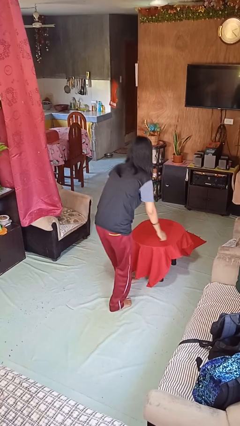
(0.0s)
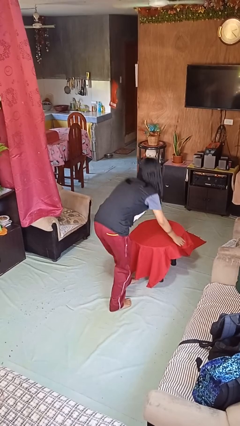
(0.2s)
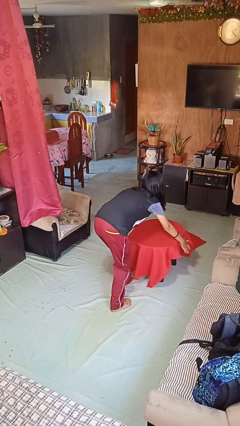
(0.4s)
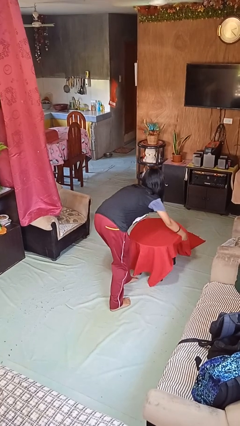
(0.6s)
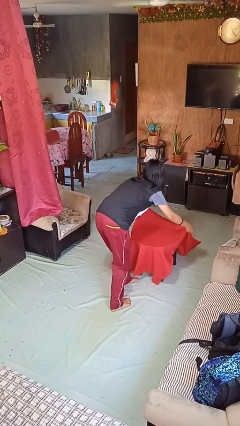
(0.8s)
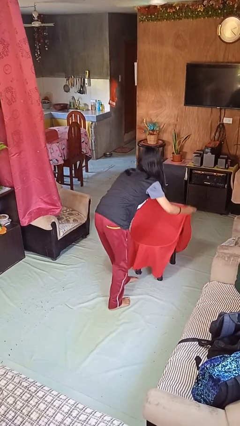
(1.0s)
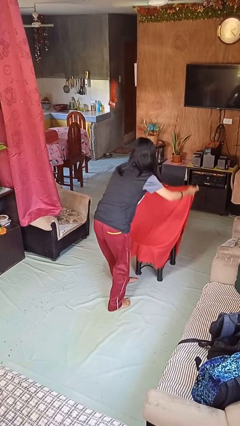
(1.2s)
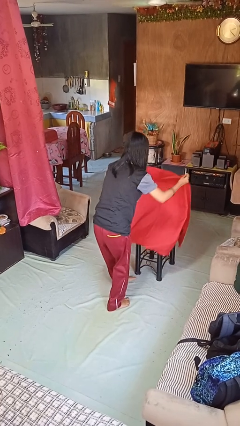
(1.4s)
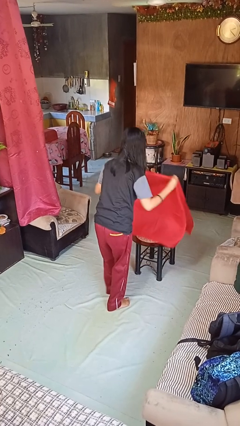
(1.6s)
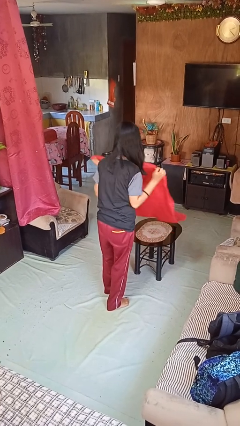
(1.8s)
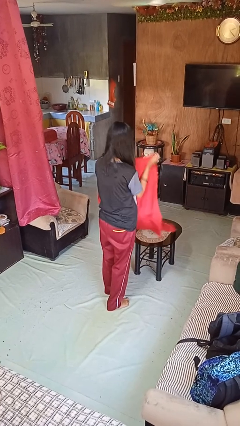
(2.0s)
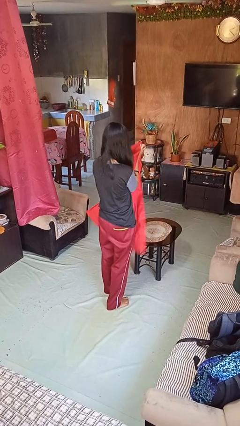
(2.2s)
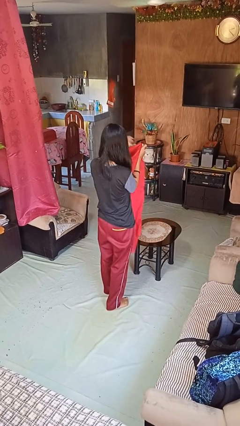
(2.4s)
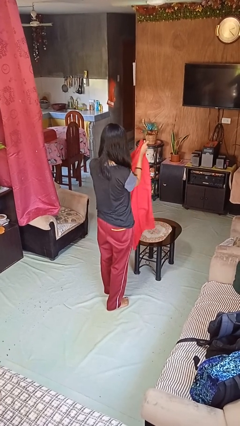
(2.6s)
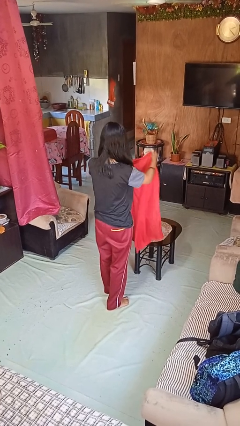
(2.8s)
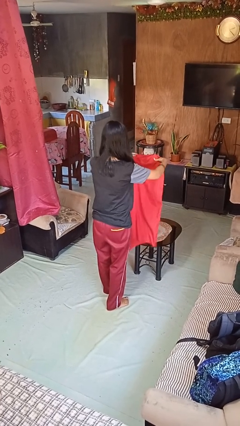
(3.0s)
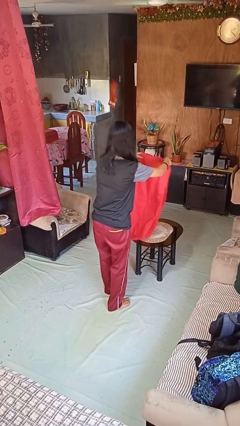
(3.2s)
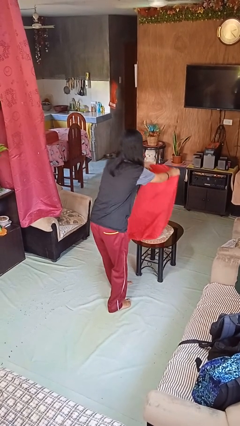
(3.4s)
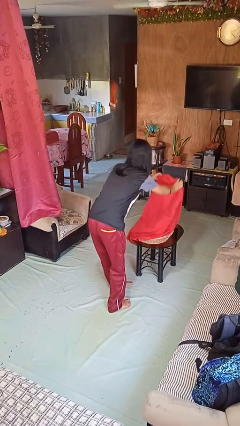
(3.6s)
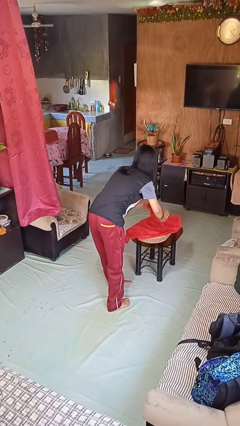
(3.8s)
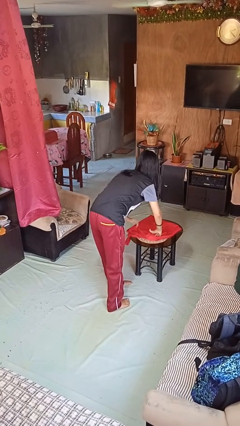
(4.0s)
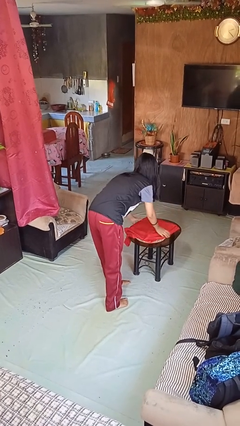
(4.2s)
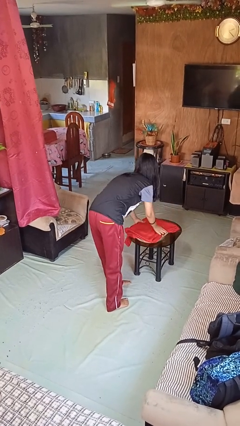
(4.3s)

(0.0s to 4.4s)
person folds tablecloth

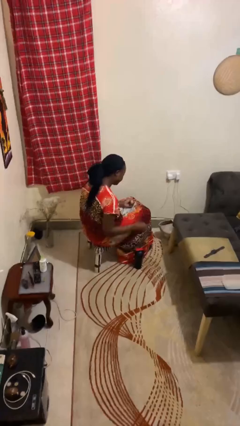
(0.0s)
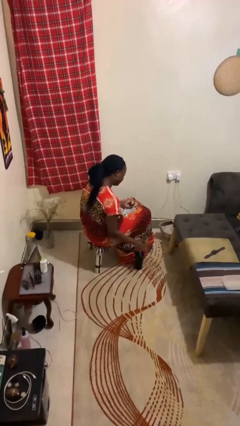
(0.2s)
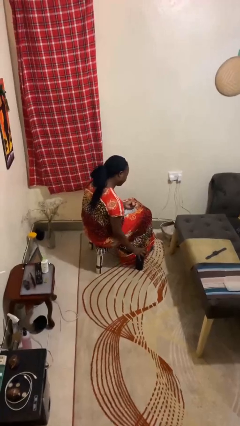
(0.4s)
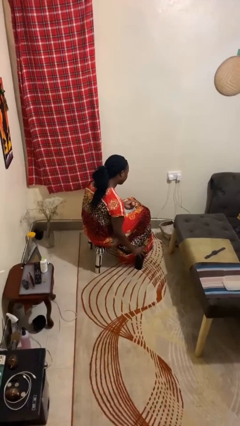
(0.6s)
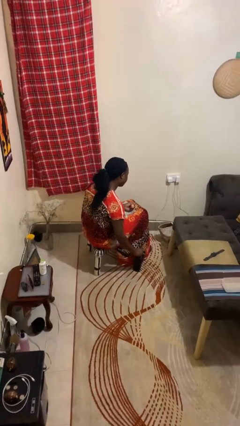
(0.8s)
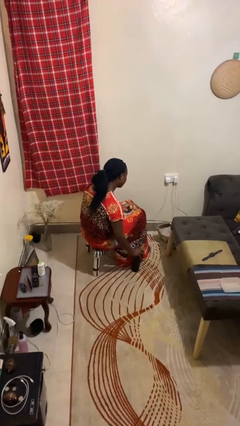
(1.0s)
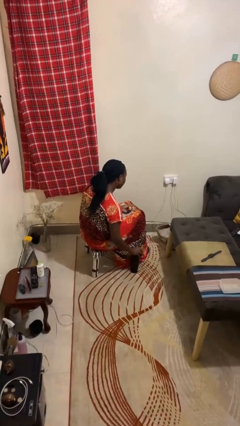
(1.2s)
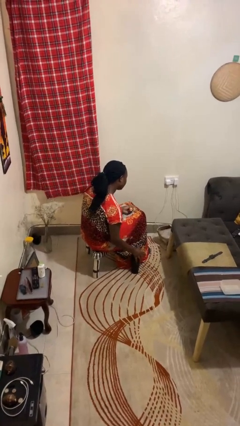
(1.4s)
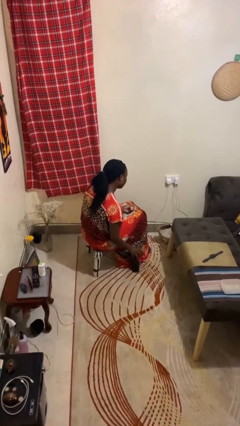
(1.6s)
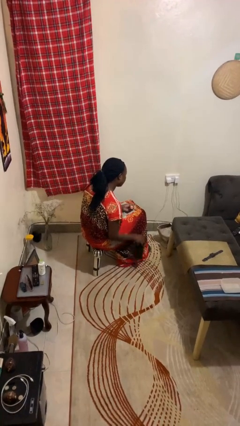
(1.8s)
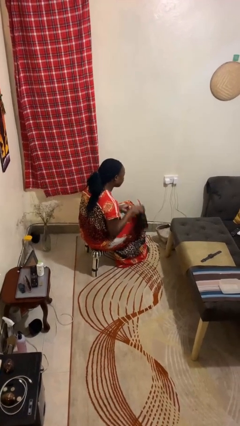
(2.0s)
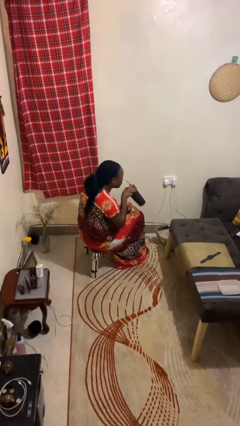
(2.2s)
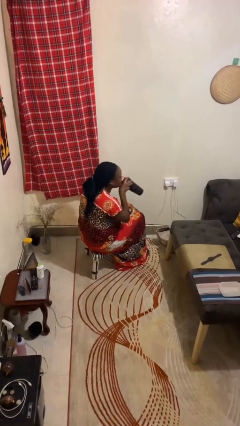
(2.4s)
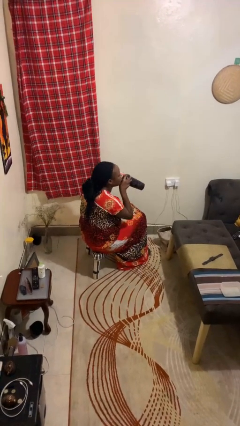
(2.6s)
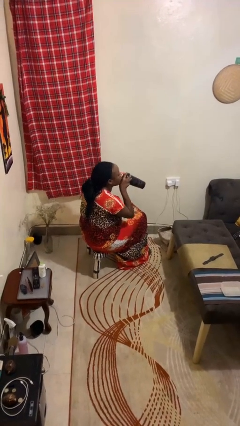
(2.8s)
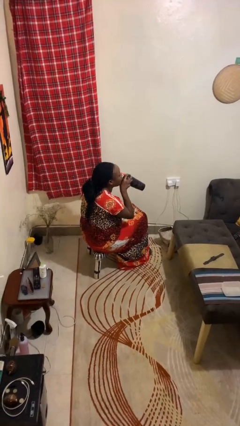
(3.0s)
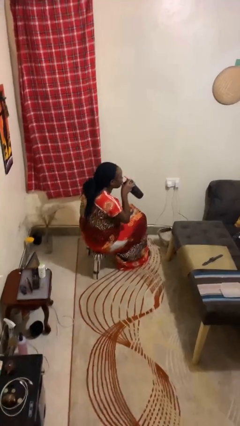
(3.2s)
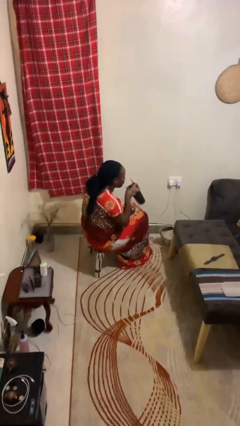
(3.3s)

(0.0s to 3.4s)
person drinks from cup

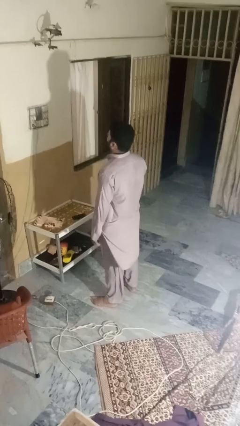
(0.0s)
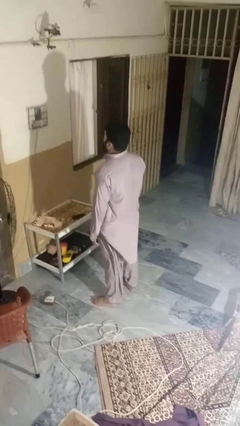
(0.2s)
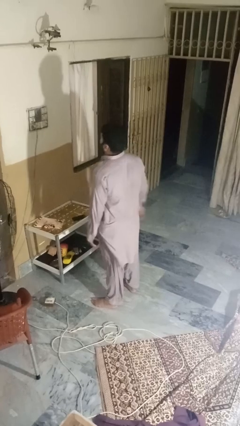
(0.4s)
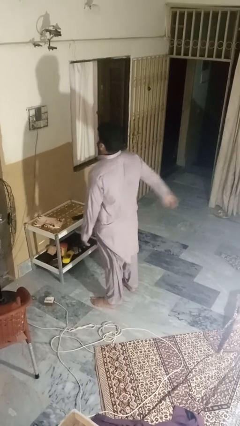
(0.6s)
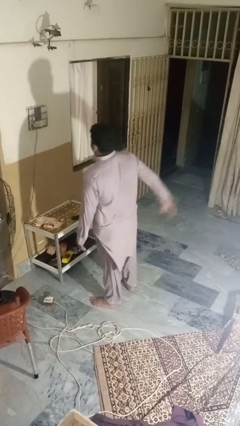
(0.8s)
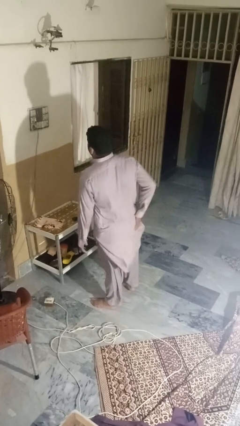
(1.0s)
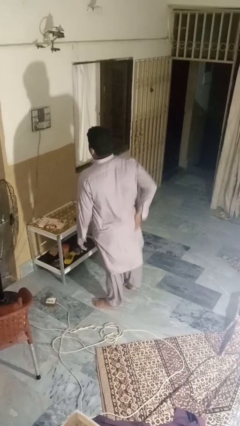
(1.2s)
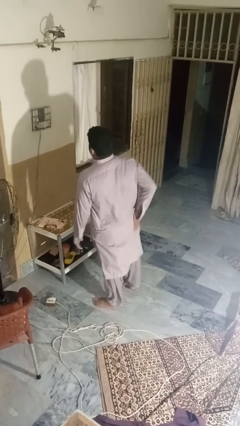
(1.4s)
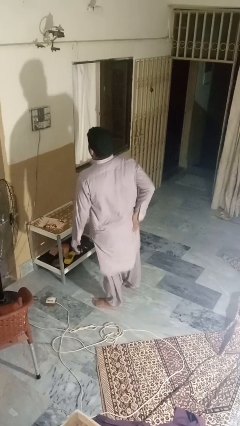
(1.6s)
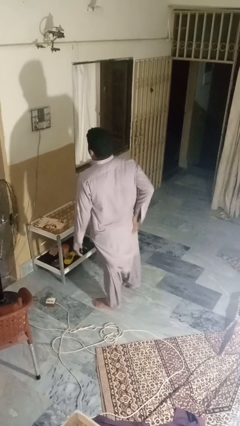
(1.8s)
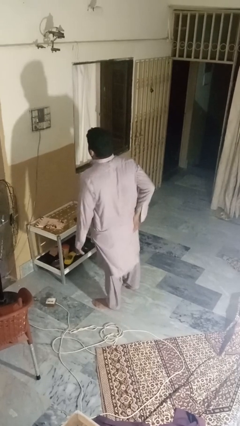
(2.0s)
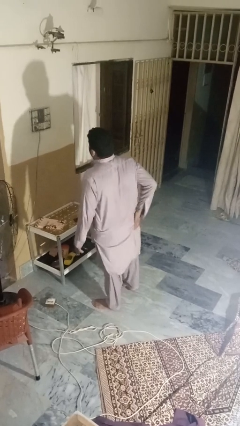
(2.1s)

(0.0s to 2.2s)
person wiggles hips

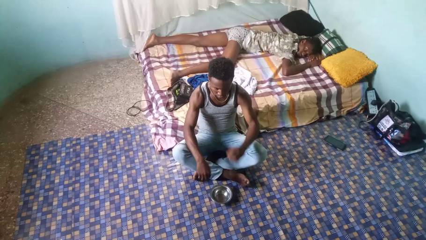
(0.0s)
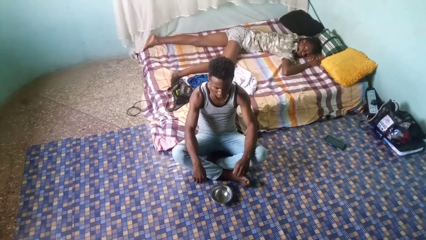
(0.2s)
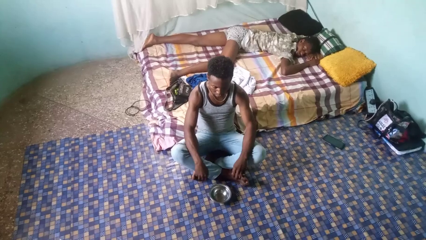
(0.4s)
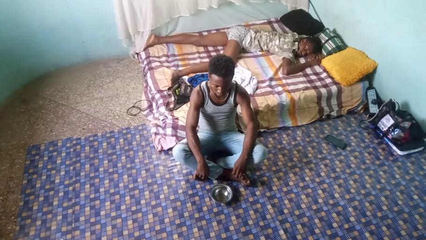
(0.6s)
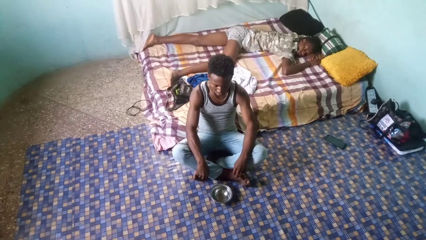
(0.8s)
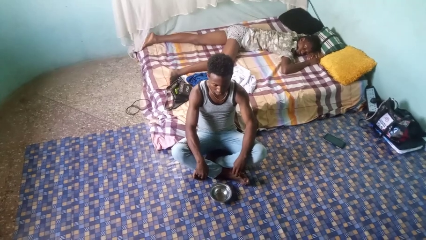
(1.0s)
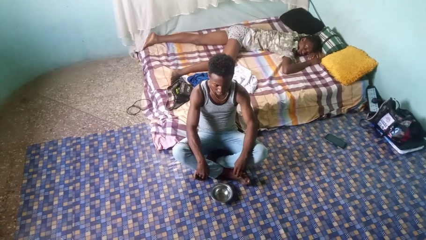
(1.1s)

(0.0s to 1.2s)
person licks fingers

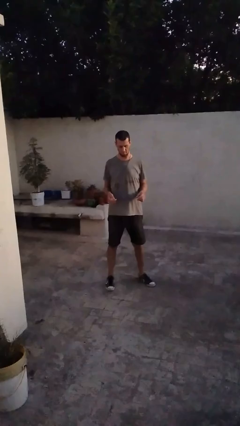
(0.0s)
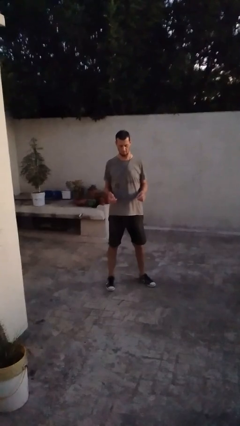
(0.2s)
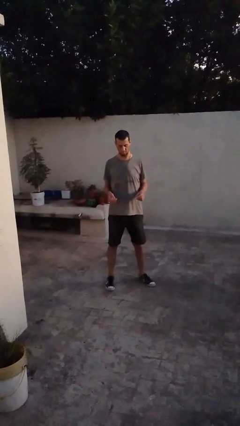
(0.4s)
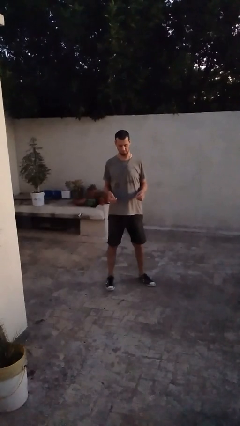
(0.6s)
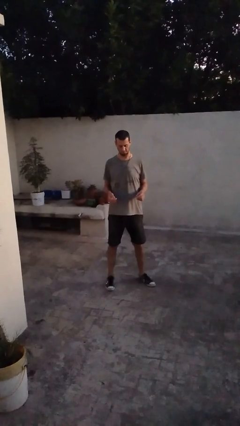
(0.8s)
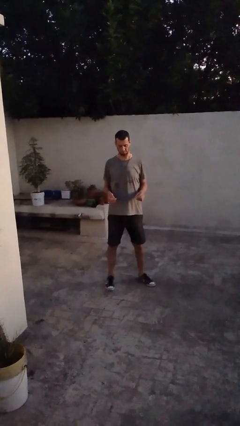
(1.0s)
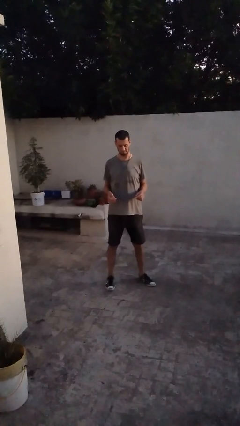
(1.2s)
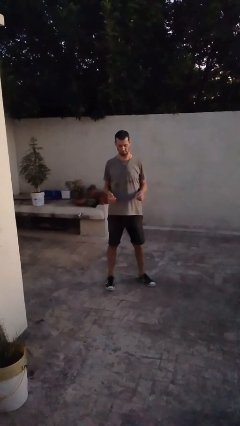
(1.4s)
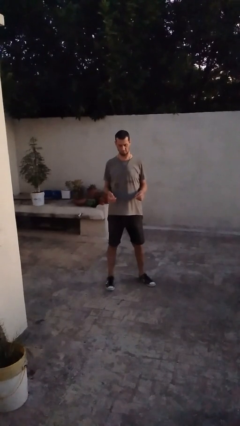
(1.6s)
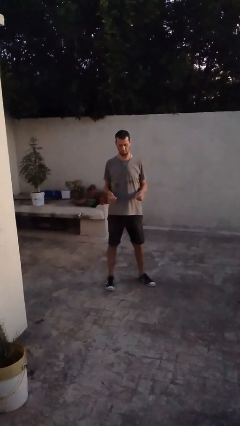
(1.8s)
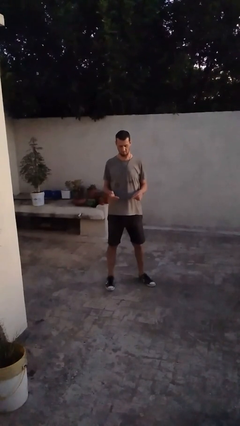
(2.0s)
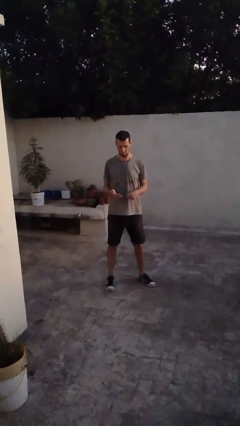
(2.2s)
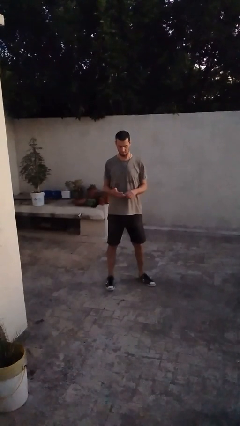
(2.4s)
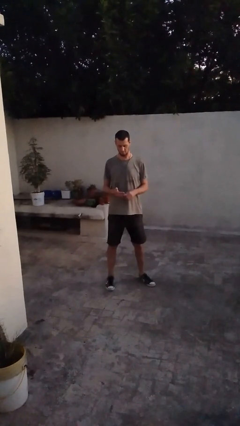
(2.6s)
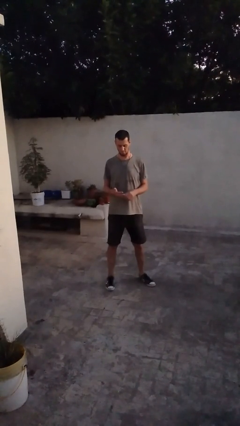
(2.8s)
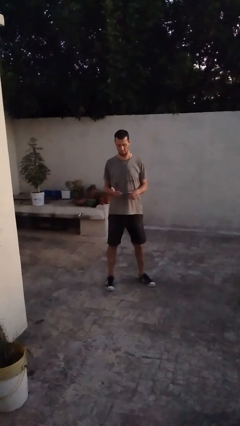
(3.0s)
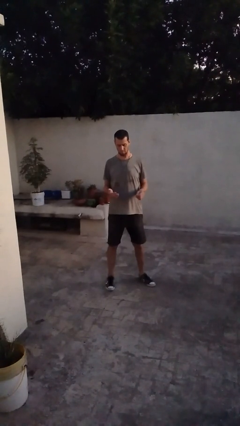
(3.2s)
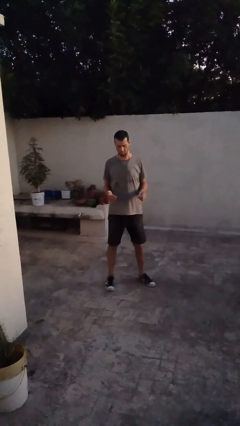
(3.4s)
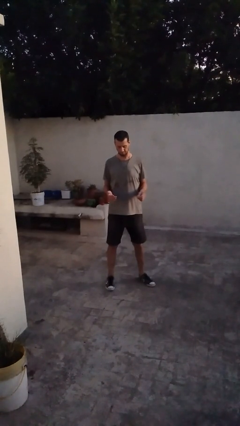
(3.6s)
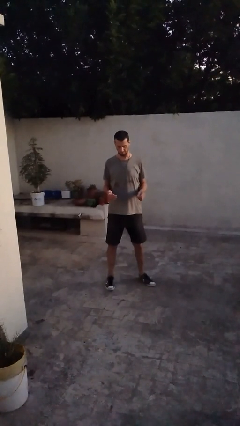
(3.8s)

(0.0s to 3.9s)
person puts on ring

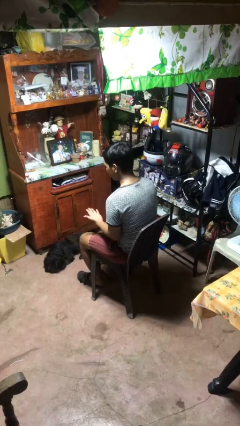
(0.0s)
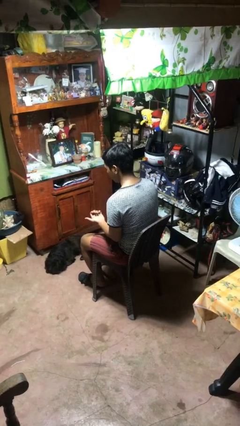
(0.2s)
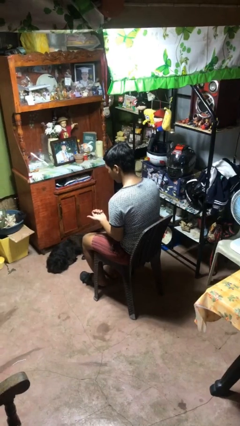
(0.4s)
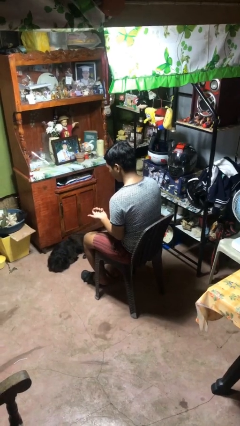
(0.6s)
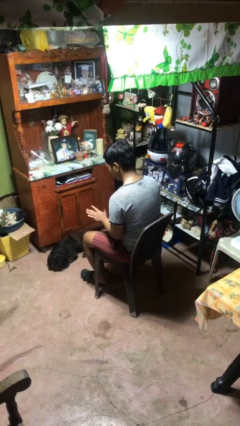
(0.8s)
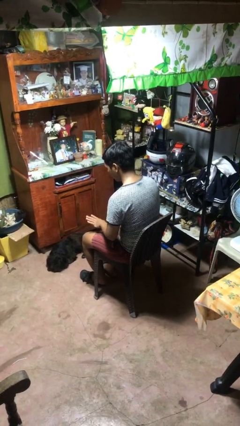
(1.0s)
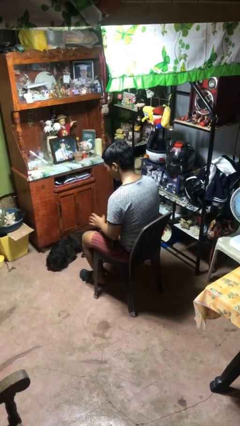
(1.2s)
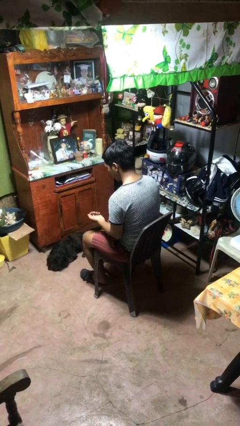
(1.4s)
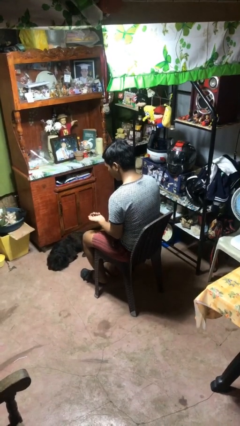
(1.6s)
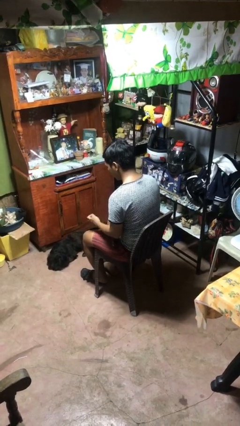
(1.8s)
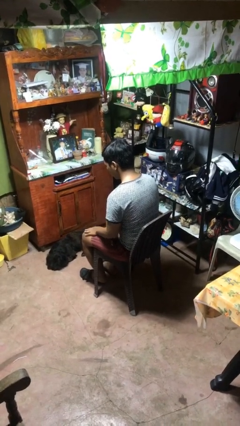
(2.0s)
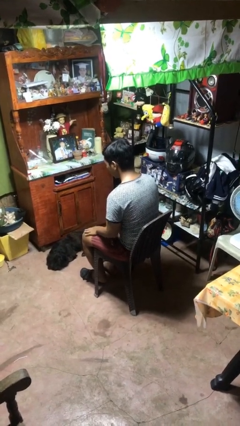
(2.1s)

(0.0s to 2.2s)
person looks at hands in lap

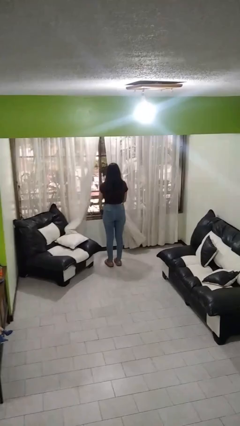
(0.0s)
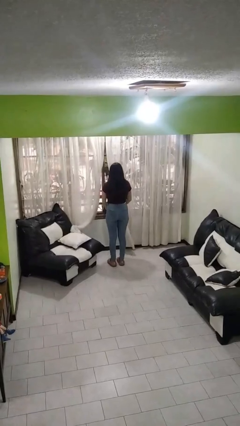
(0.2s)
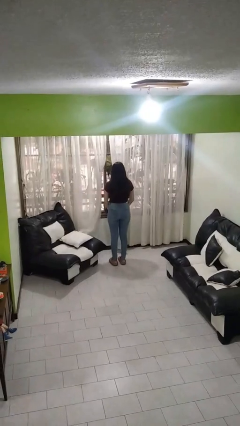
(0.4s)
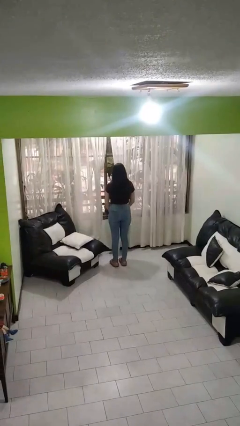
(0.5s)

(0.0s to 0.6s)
person closes curtains
